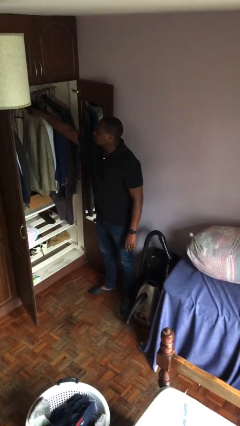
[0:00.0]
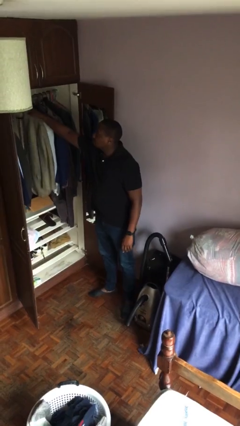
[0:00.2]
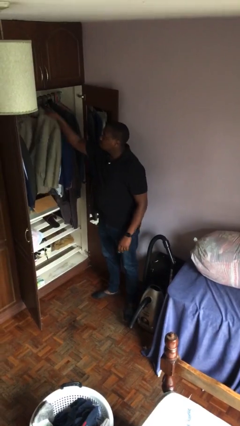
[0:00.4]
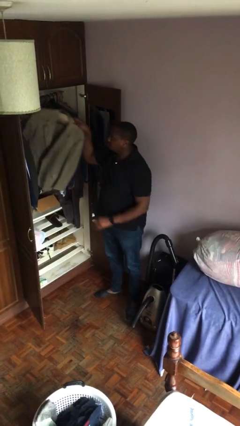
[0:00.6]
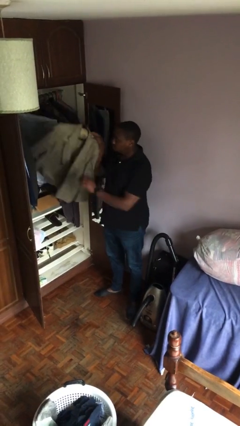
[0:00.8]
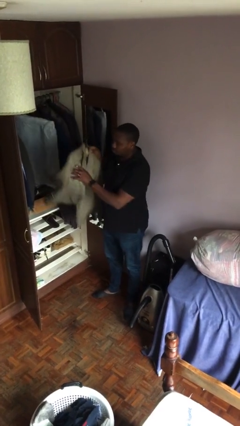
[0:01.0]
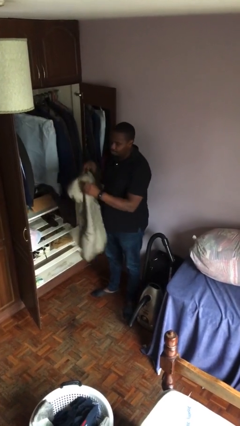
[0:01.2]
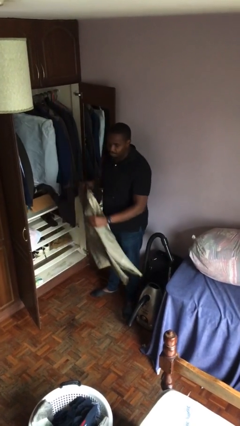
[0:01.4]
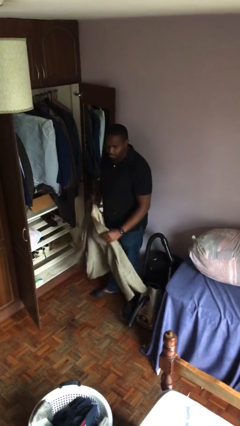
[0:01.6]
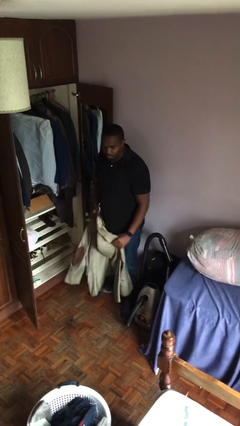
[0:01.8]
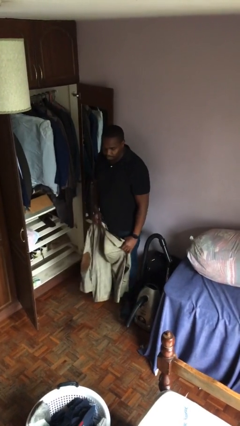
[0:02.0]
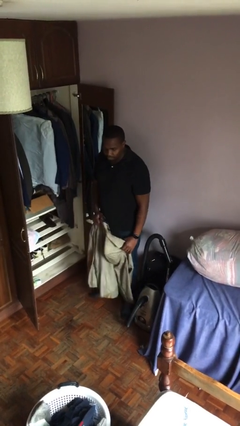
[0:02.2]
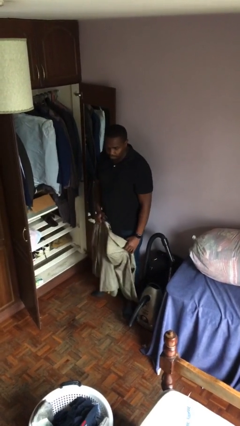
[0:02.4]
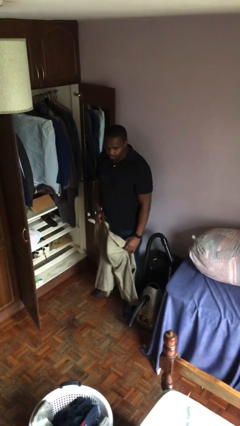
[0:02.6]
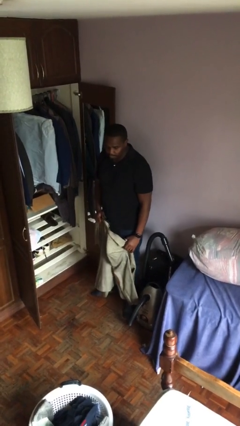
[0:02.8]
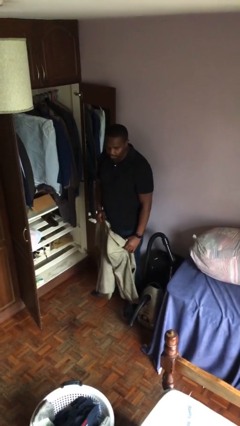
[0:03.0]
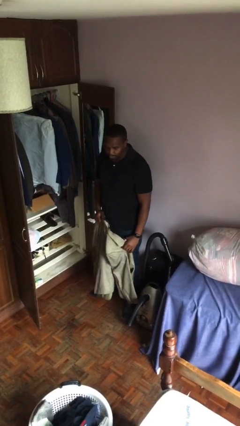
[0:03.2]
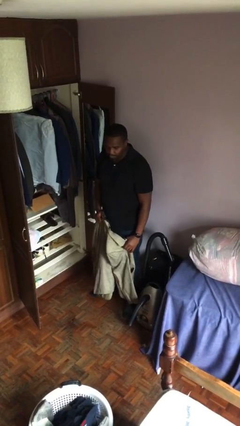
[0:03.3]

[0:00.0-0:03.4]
person takes clothes from closet

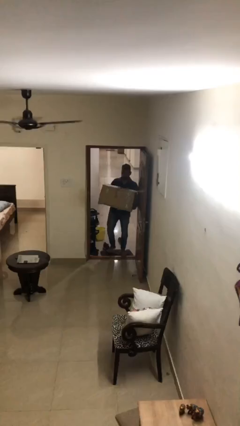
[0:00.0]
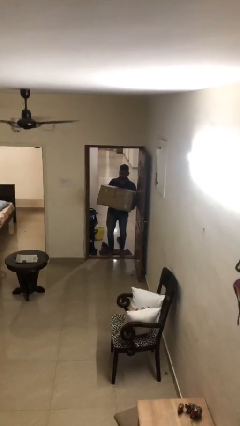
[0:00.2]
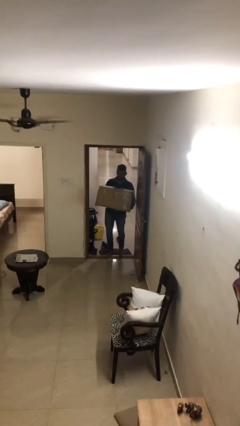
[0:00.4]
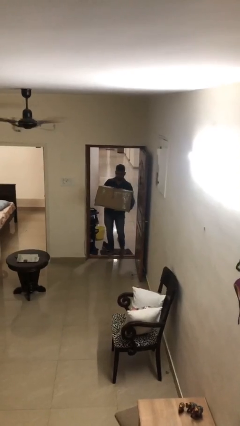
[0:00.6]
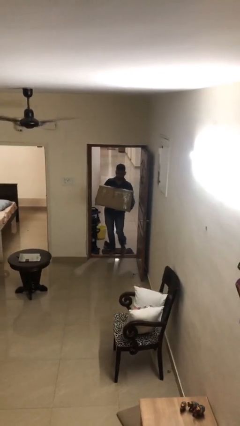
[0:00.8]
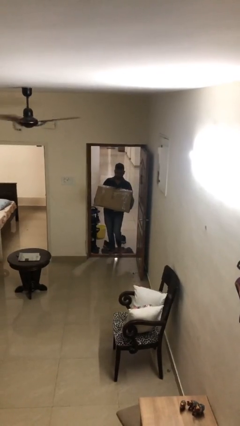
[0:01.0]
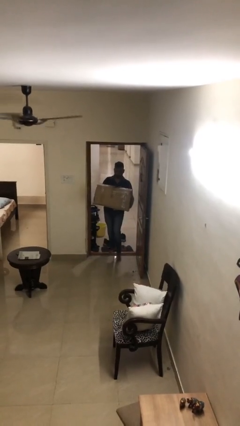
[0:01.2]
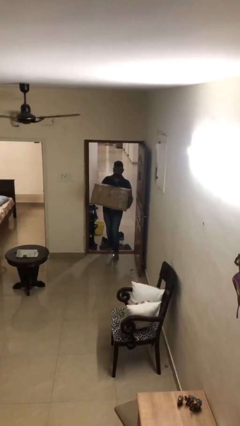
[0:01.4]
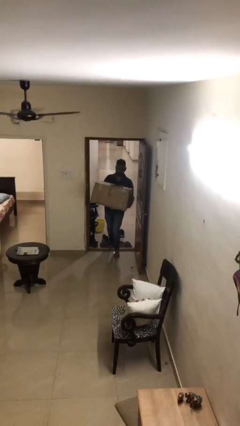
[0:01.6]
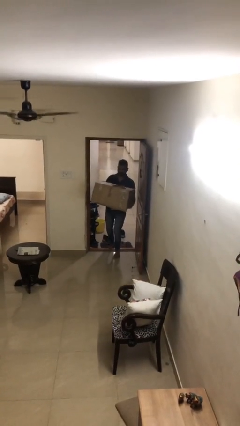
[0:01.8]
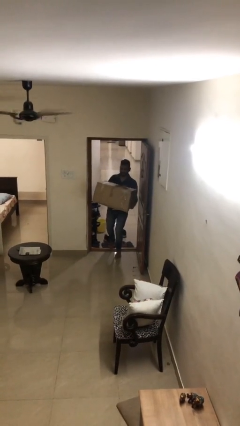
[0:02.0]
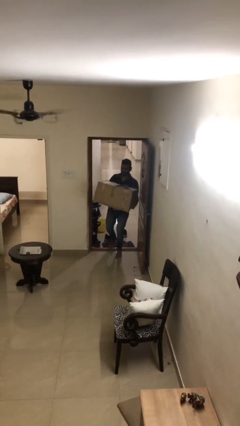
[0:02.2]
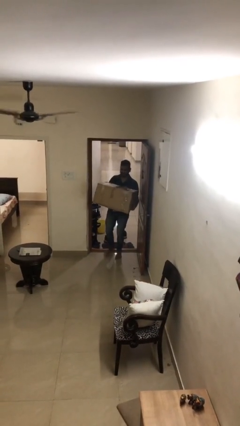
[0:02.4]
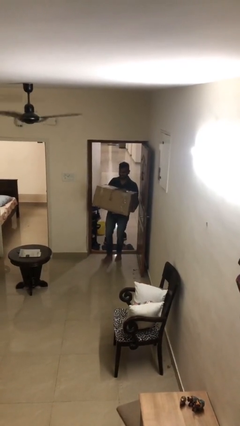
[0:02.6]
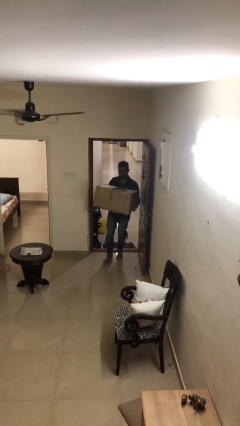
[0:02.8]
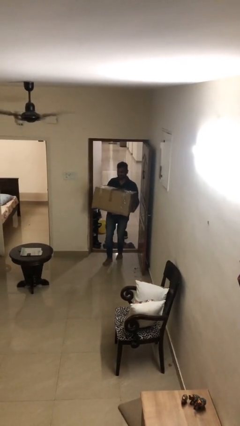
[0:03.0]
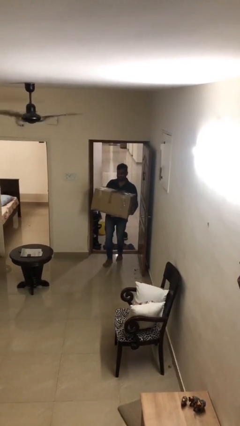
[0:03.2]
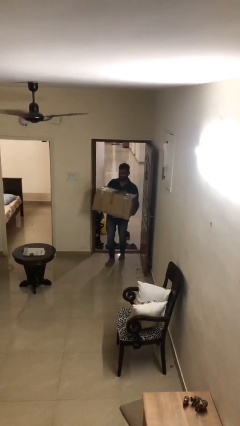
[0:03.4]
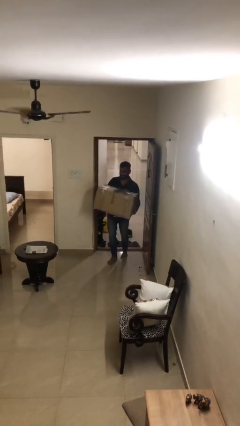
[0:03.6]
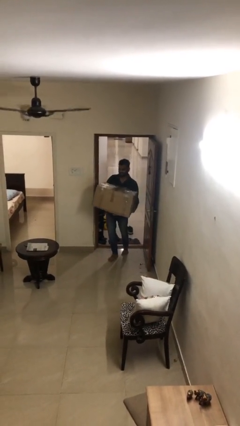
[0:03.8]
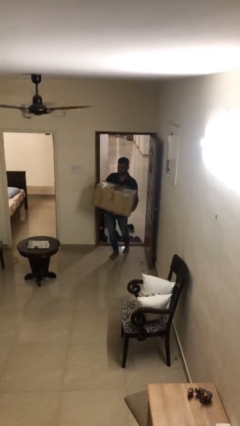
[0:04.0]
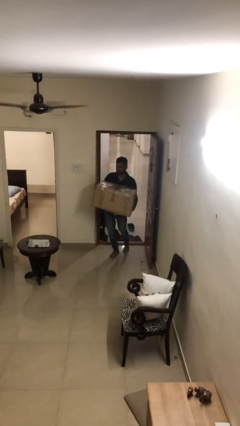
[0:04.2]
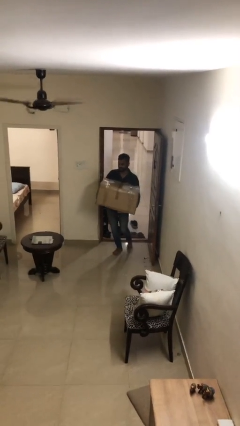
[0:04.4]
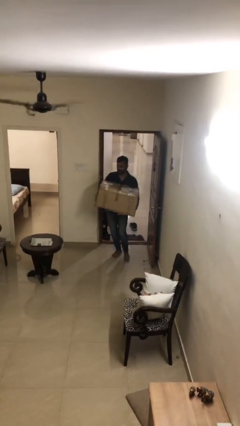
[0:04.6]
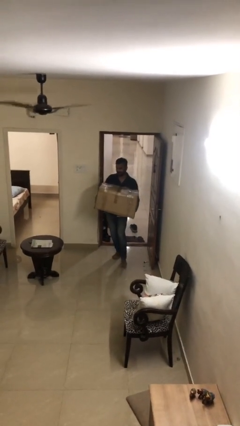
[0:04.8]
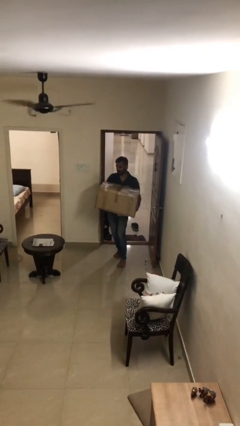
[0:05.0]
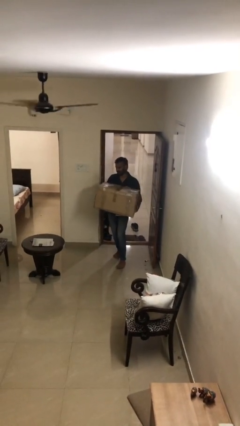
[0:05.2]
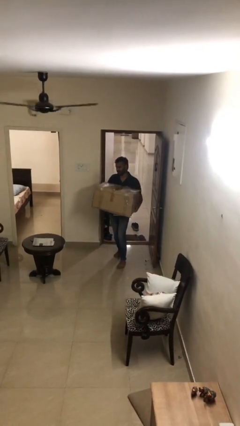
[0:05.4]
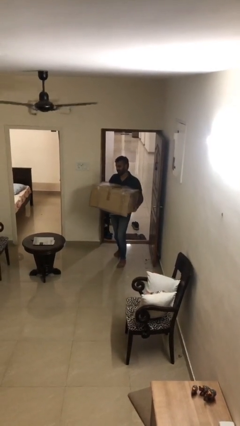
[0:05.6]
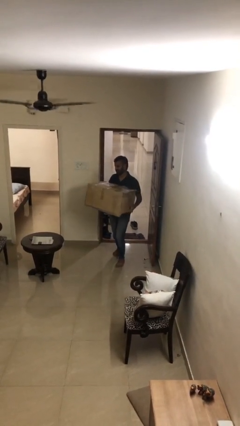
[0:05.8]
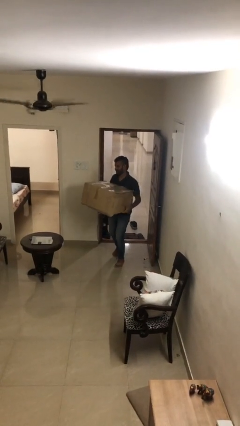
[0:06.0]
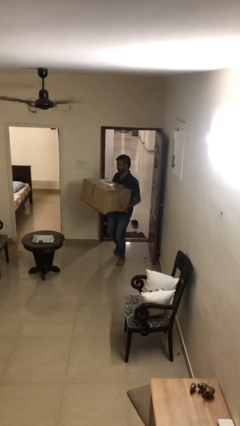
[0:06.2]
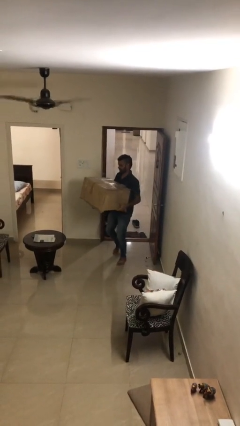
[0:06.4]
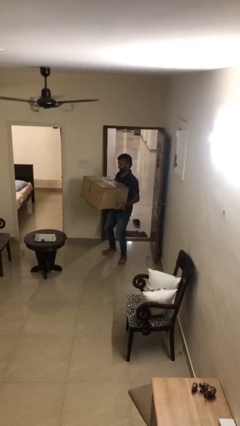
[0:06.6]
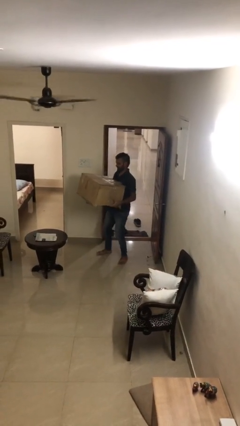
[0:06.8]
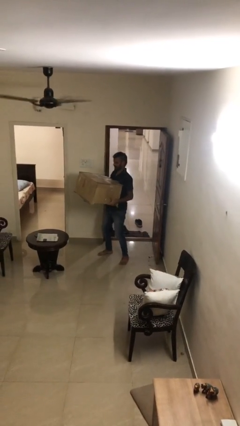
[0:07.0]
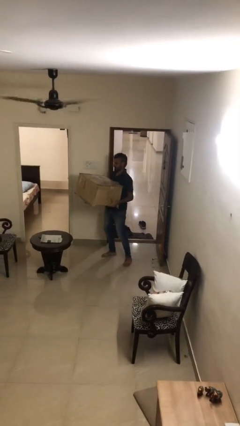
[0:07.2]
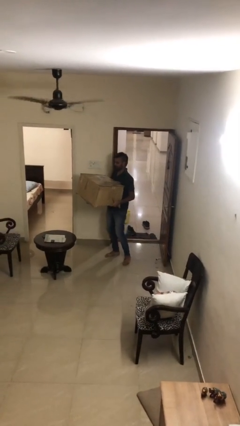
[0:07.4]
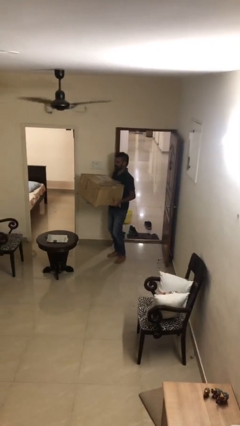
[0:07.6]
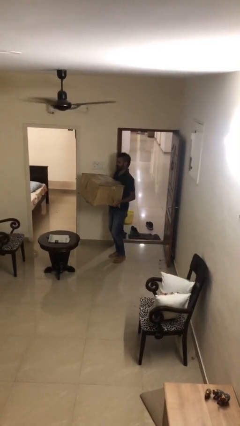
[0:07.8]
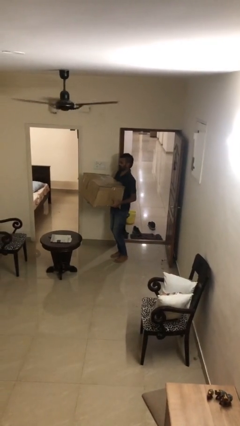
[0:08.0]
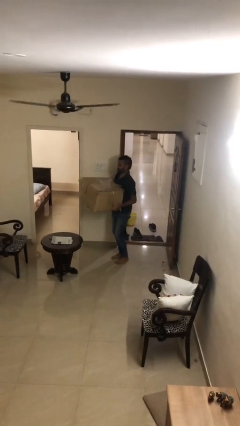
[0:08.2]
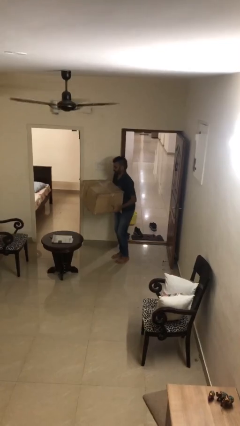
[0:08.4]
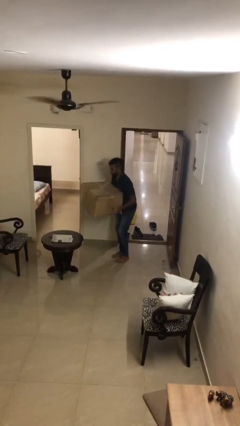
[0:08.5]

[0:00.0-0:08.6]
person carries heavy object

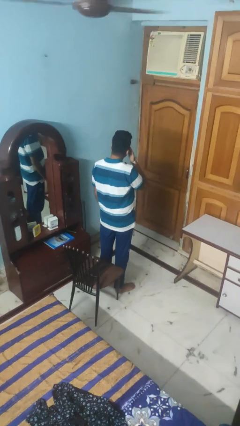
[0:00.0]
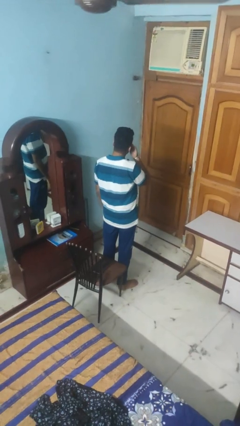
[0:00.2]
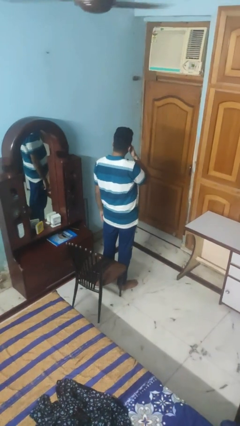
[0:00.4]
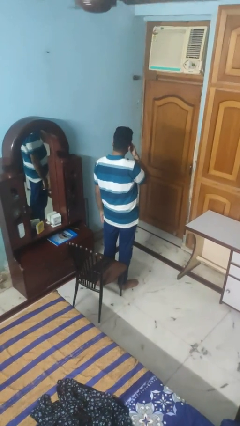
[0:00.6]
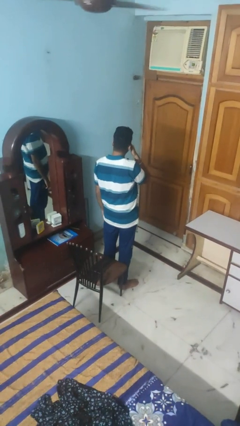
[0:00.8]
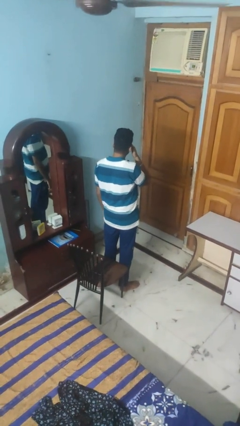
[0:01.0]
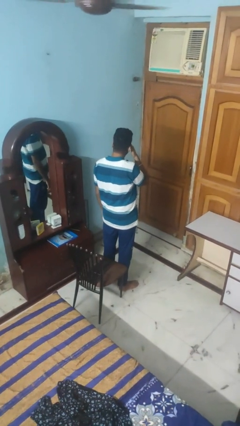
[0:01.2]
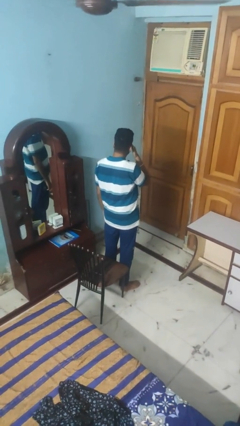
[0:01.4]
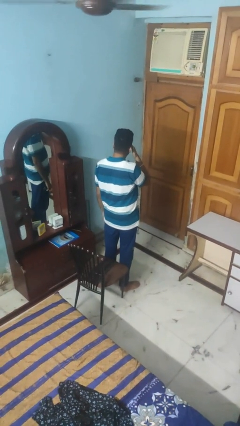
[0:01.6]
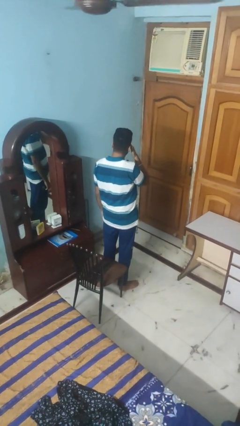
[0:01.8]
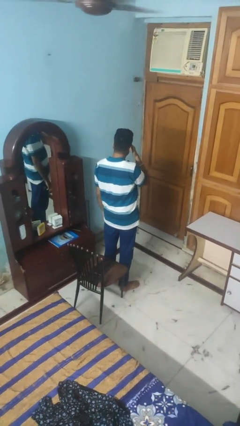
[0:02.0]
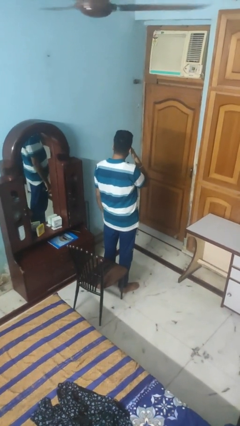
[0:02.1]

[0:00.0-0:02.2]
person rubs eyes

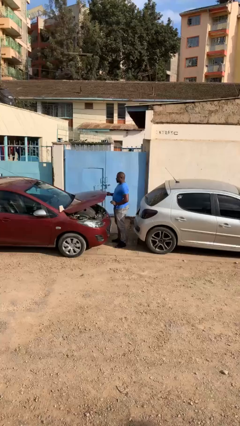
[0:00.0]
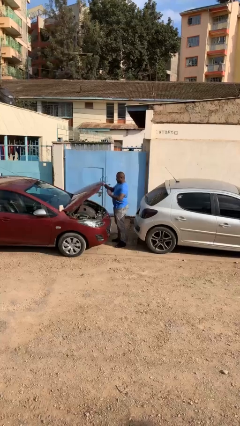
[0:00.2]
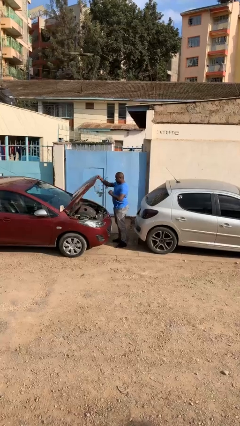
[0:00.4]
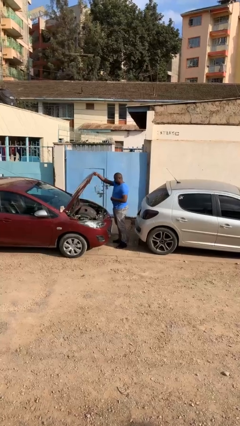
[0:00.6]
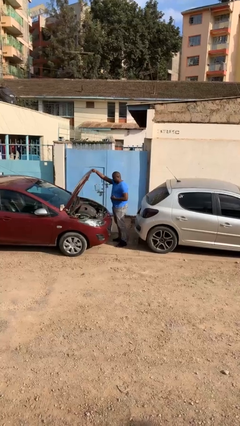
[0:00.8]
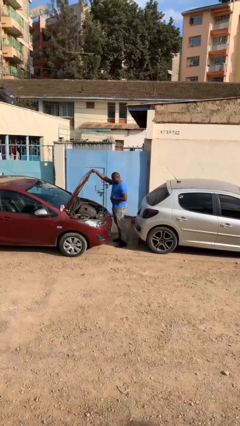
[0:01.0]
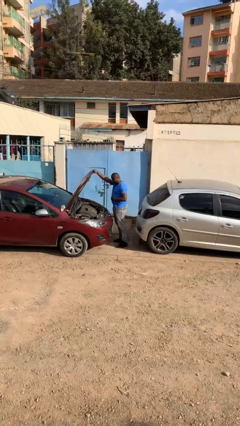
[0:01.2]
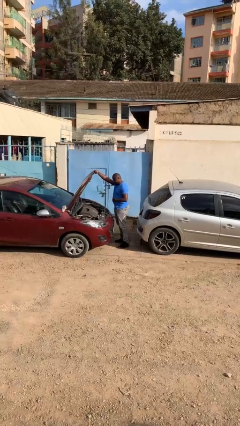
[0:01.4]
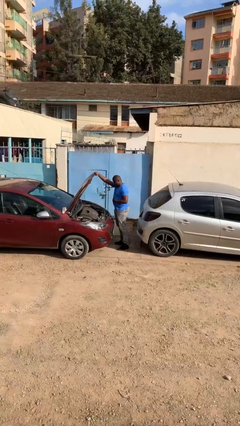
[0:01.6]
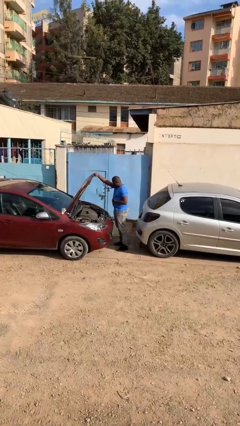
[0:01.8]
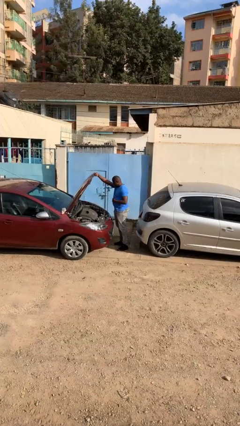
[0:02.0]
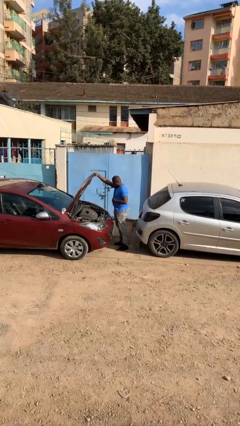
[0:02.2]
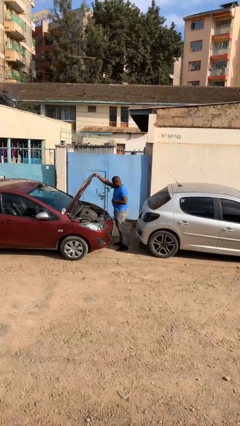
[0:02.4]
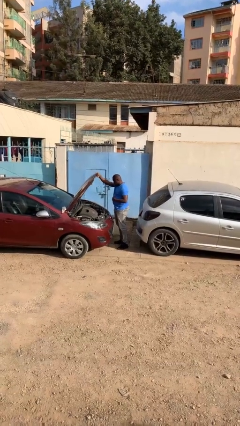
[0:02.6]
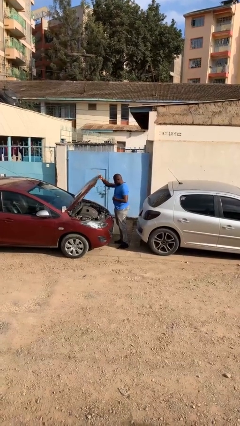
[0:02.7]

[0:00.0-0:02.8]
person opens car hood

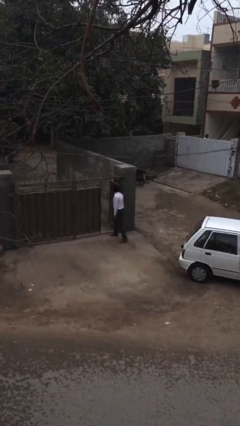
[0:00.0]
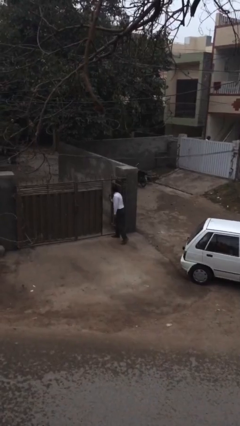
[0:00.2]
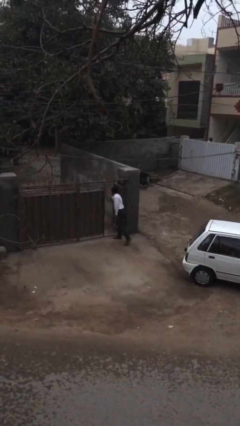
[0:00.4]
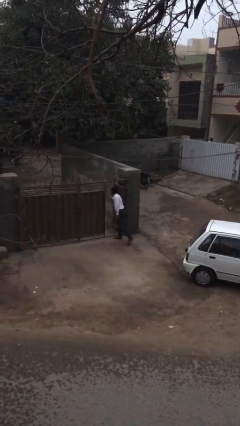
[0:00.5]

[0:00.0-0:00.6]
person closes facility door
